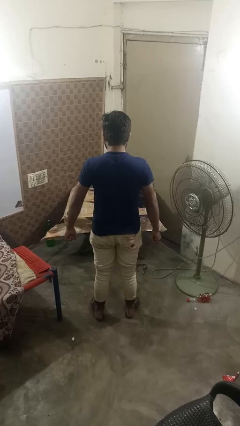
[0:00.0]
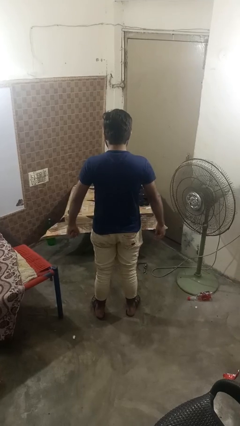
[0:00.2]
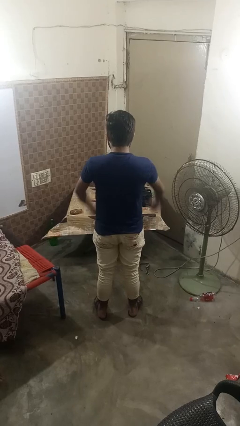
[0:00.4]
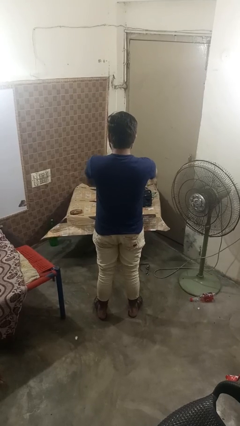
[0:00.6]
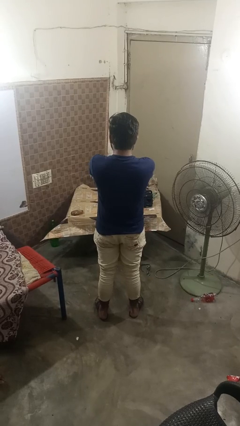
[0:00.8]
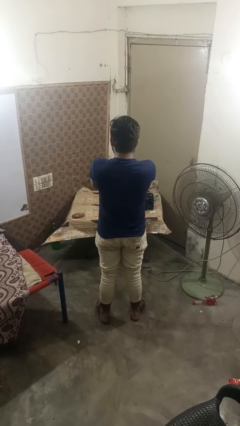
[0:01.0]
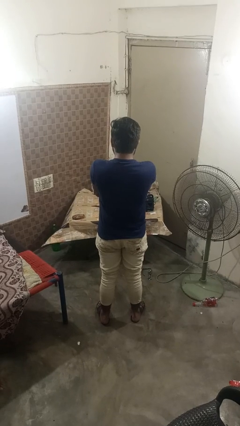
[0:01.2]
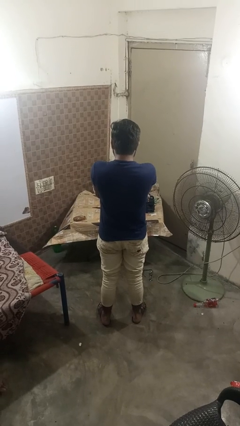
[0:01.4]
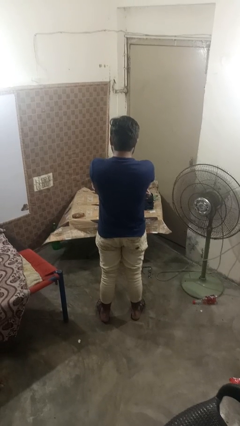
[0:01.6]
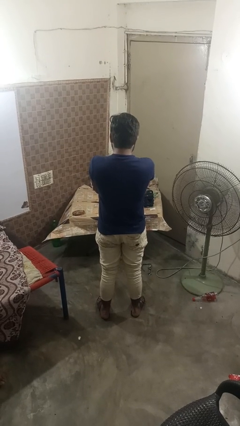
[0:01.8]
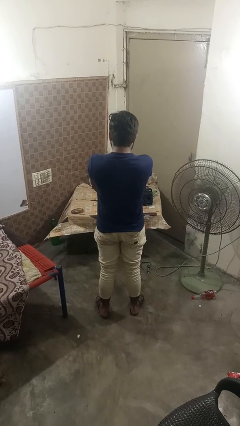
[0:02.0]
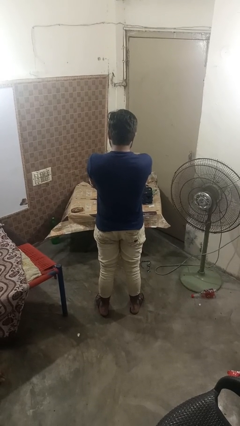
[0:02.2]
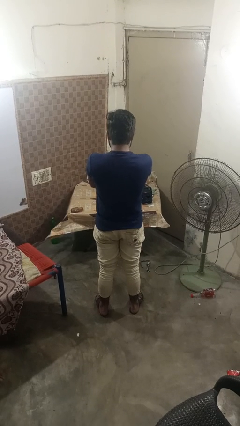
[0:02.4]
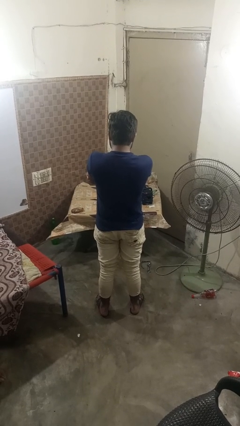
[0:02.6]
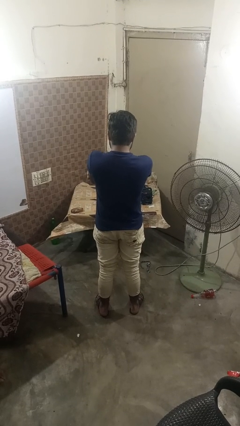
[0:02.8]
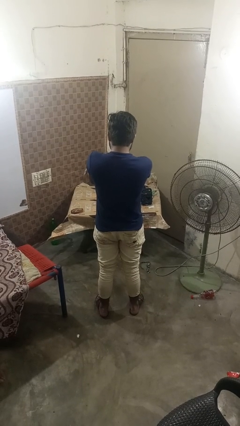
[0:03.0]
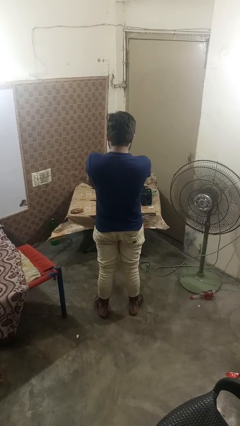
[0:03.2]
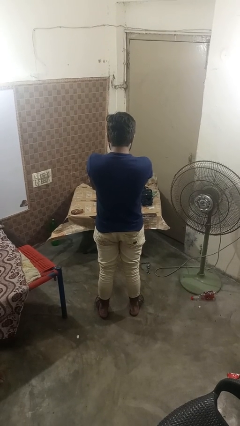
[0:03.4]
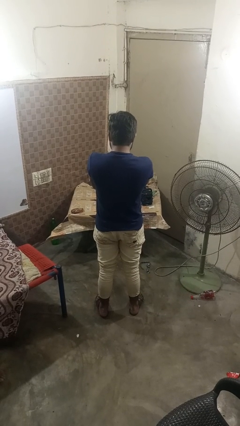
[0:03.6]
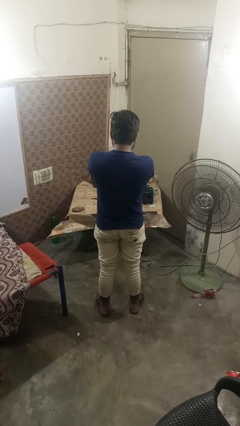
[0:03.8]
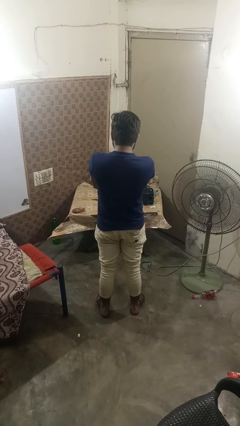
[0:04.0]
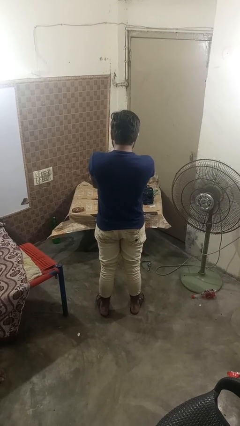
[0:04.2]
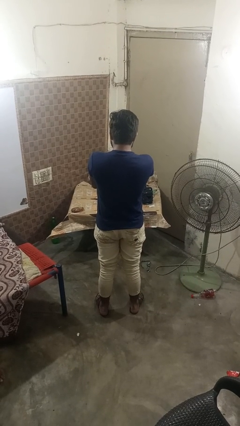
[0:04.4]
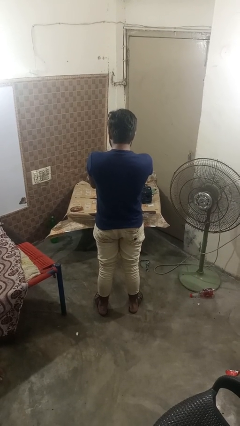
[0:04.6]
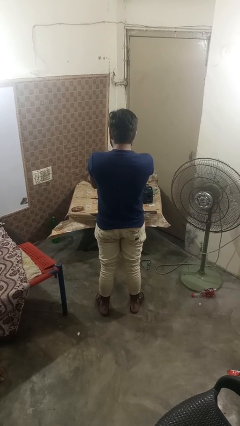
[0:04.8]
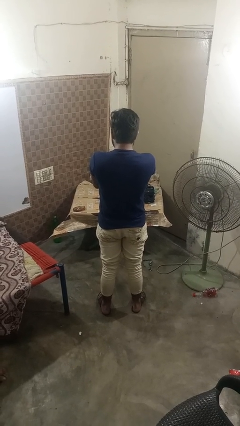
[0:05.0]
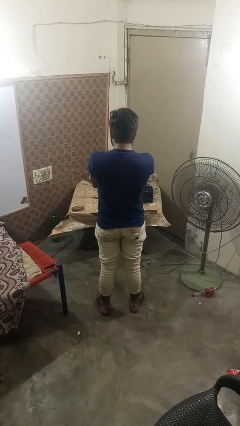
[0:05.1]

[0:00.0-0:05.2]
person crosses arms

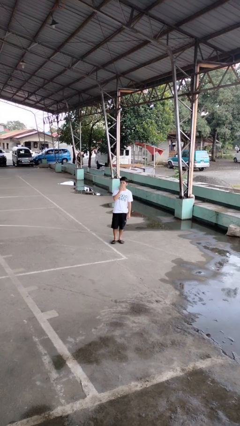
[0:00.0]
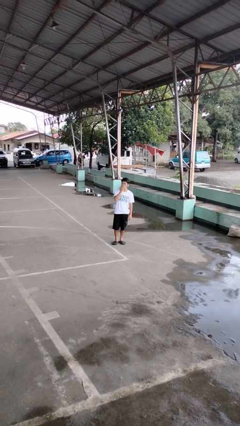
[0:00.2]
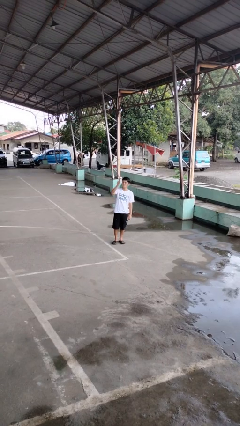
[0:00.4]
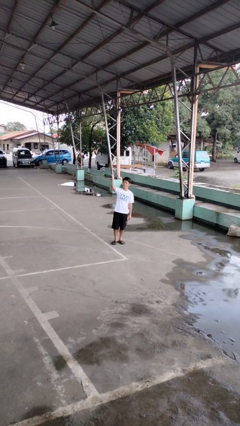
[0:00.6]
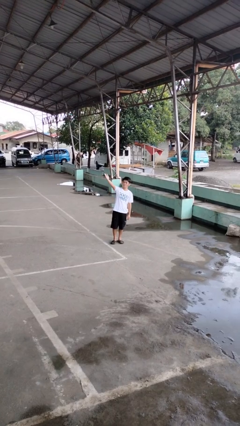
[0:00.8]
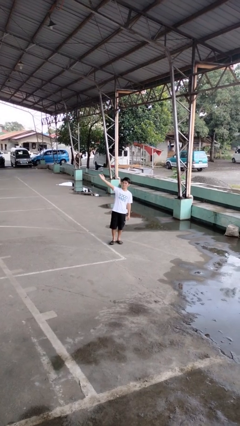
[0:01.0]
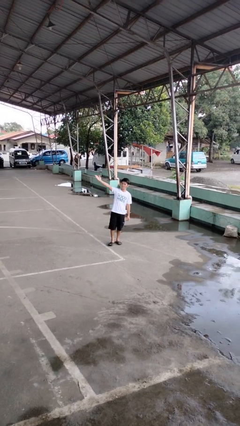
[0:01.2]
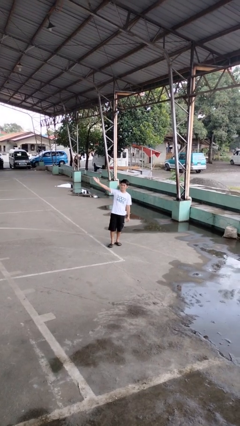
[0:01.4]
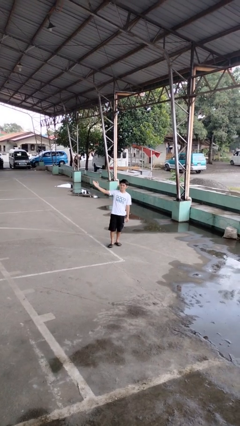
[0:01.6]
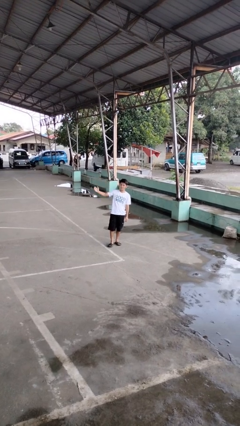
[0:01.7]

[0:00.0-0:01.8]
person gestures blow kiss

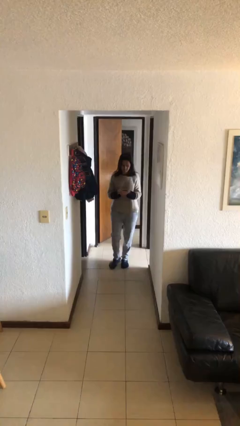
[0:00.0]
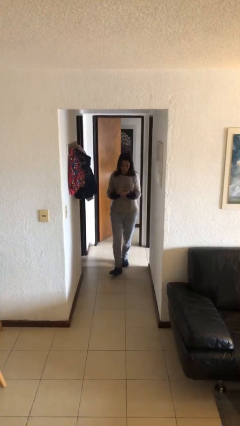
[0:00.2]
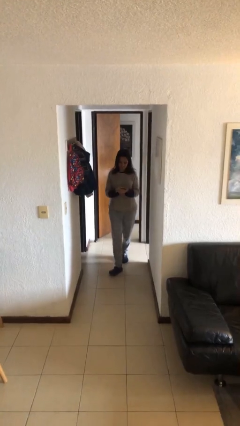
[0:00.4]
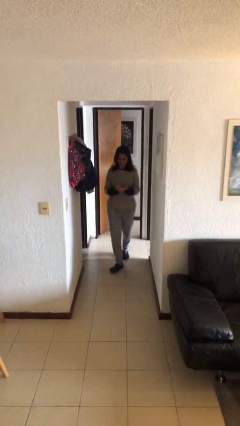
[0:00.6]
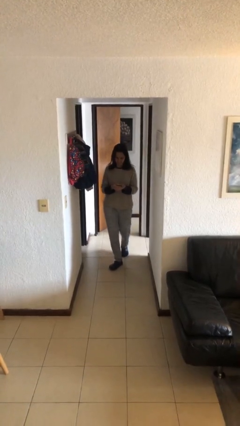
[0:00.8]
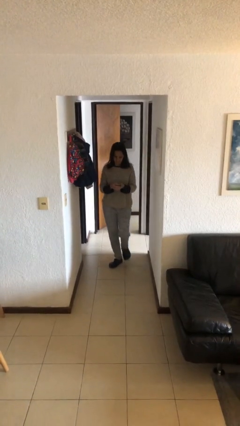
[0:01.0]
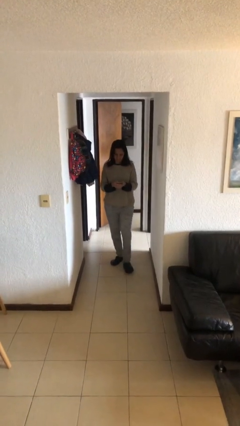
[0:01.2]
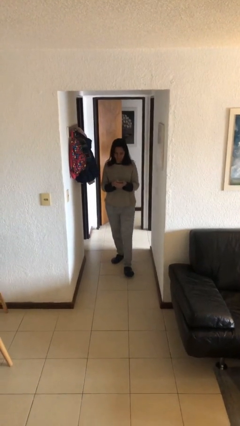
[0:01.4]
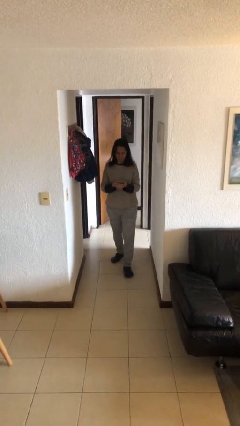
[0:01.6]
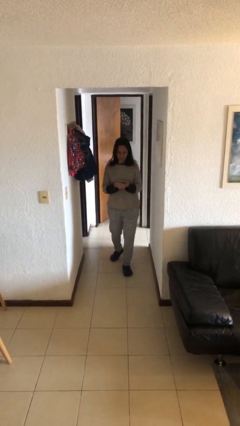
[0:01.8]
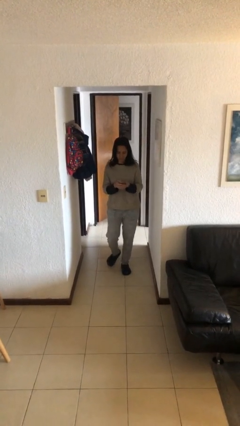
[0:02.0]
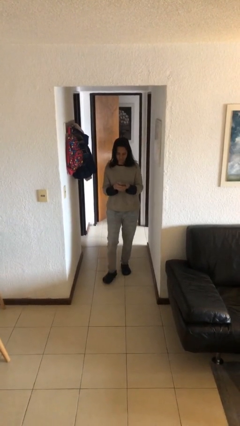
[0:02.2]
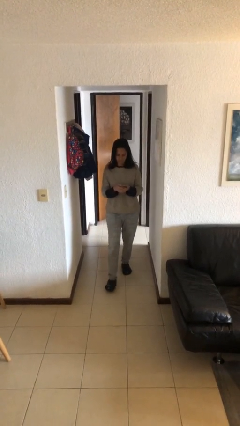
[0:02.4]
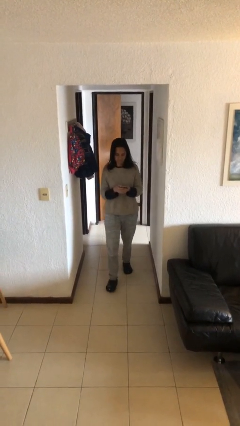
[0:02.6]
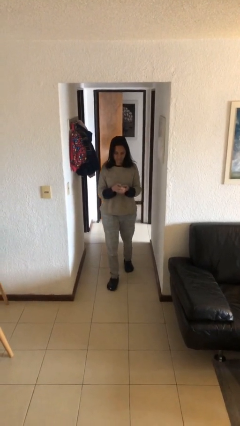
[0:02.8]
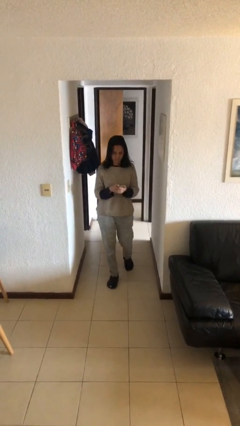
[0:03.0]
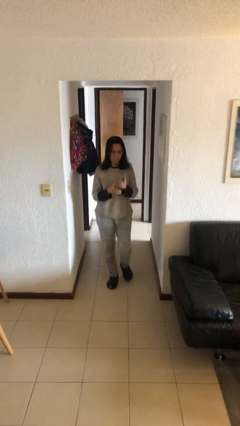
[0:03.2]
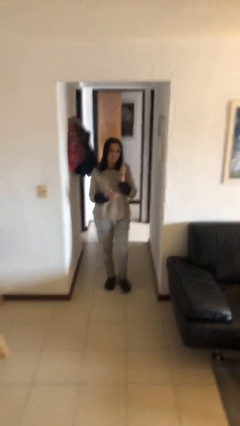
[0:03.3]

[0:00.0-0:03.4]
person texts on phone

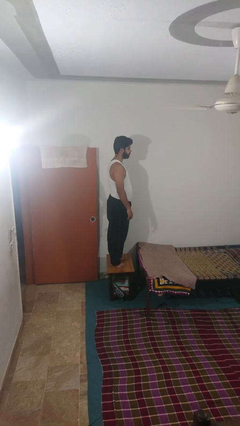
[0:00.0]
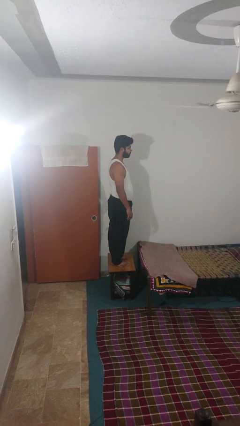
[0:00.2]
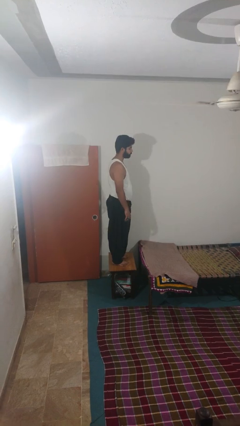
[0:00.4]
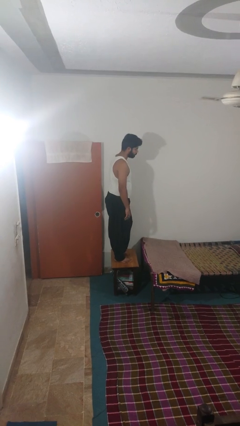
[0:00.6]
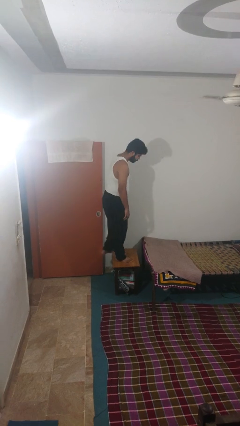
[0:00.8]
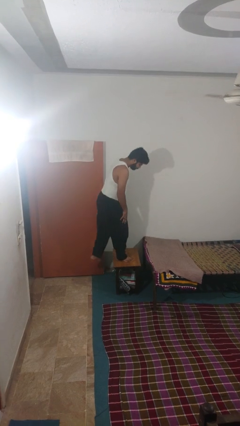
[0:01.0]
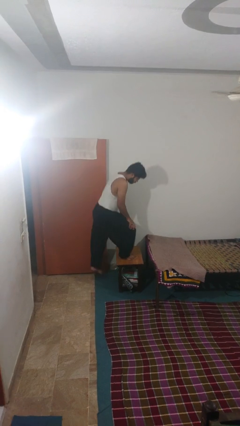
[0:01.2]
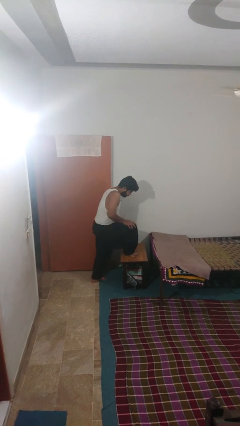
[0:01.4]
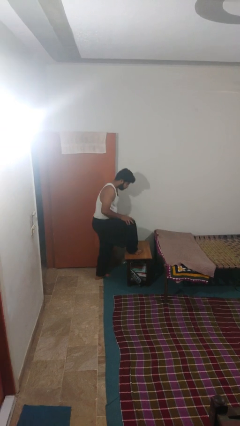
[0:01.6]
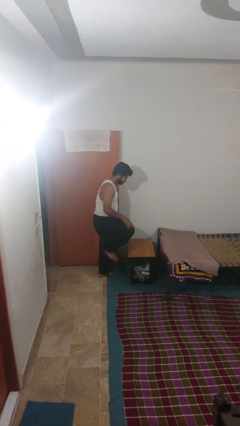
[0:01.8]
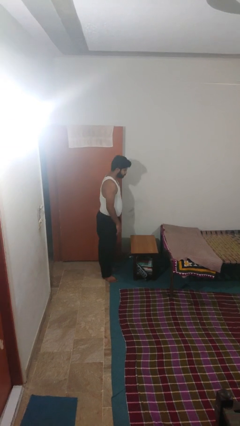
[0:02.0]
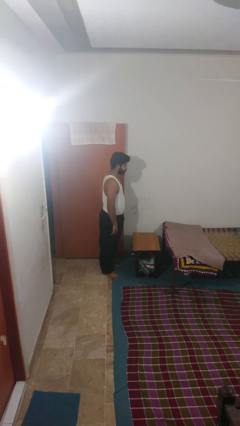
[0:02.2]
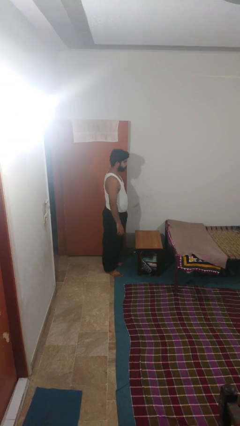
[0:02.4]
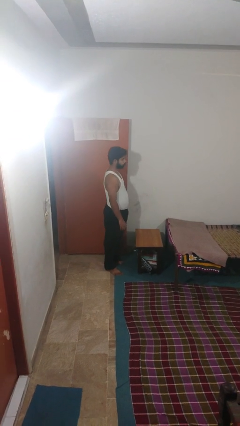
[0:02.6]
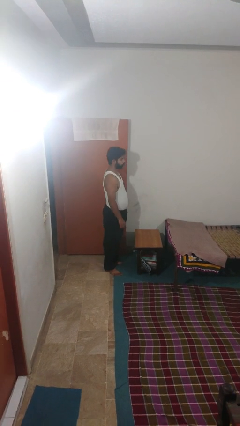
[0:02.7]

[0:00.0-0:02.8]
person climbs off table

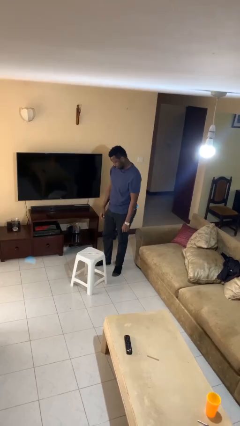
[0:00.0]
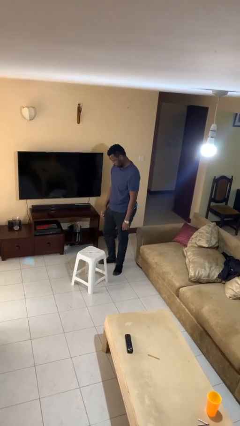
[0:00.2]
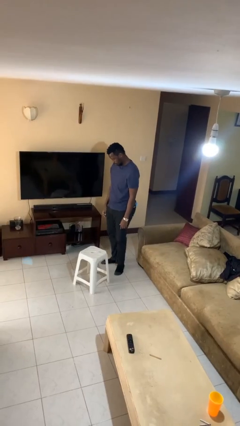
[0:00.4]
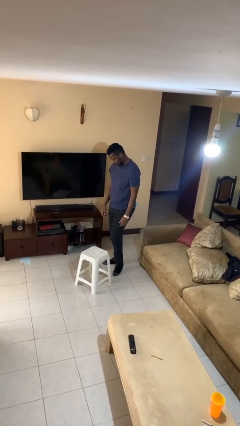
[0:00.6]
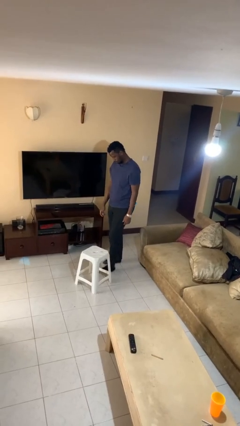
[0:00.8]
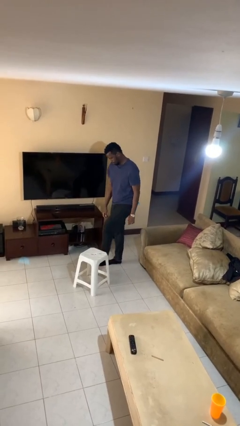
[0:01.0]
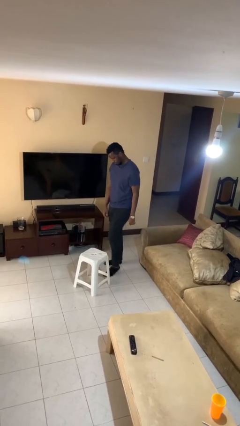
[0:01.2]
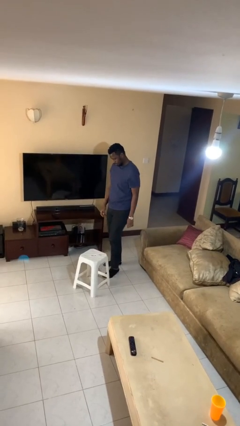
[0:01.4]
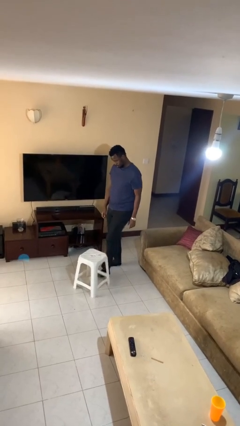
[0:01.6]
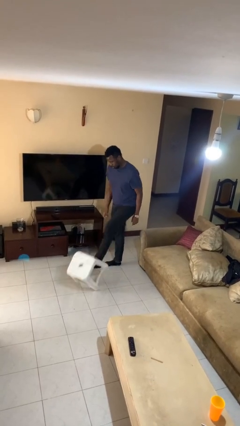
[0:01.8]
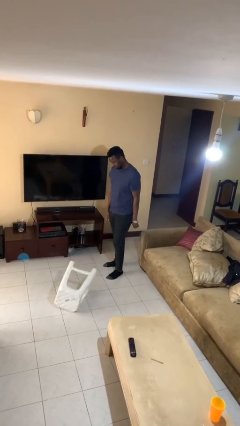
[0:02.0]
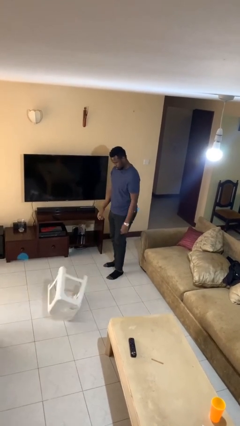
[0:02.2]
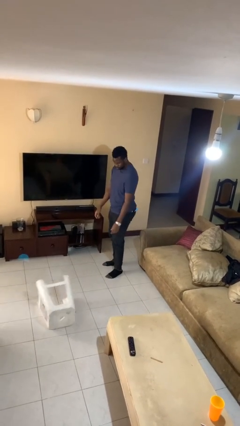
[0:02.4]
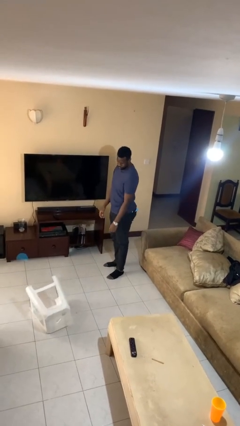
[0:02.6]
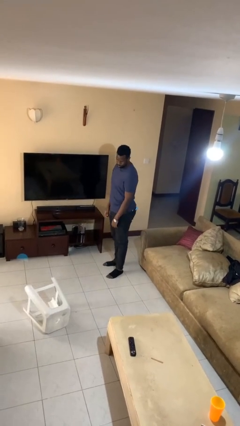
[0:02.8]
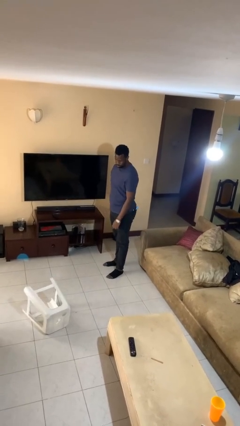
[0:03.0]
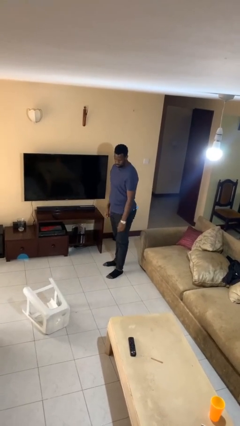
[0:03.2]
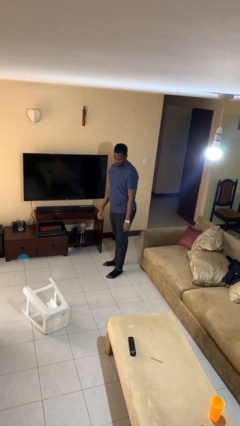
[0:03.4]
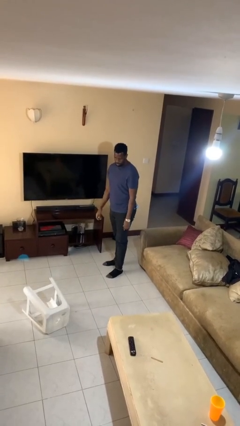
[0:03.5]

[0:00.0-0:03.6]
person knocks over furniture

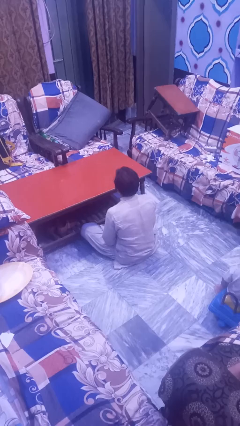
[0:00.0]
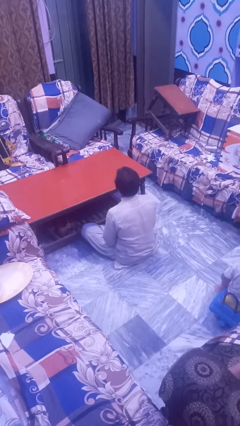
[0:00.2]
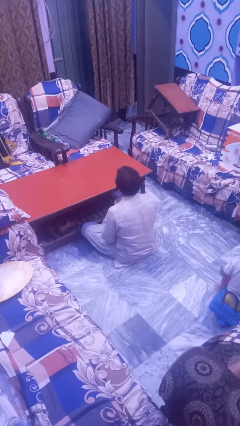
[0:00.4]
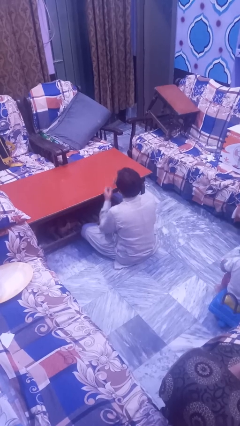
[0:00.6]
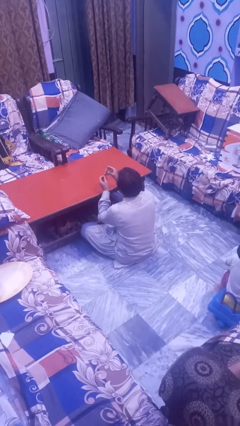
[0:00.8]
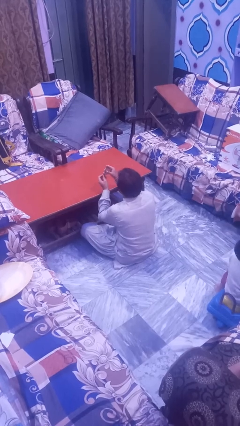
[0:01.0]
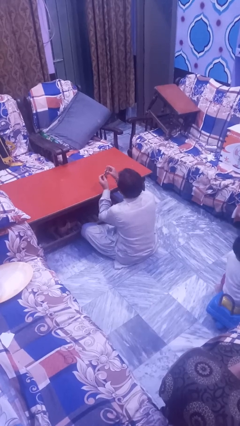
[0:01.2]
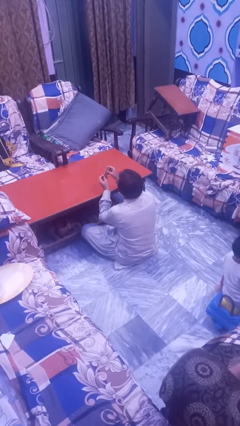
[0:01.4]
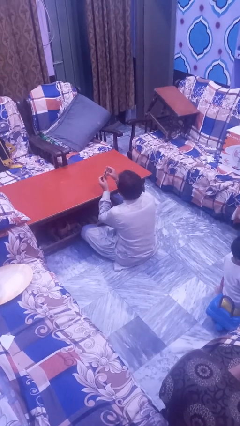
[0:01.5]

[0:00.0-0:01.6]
person clips fingernails
